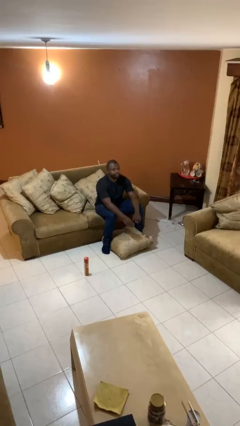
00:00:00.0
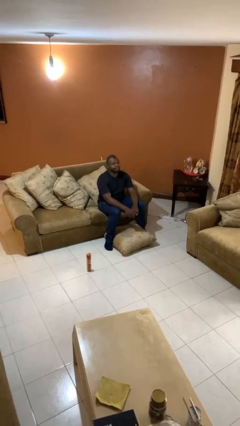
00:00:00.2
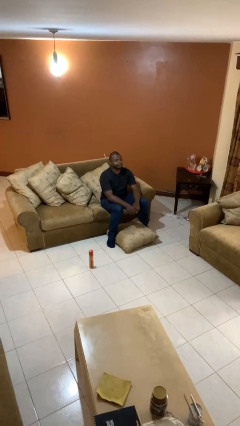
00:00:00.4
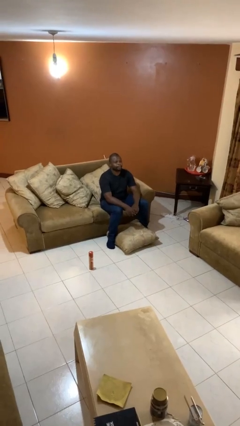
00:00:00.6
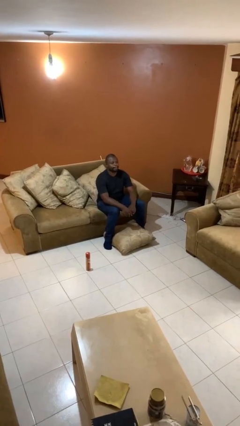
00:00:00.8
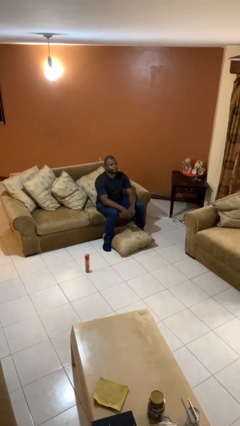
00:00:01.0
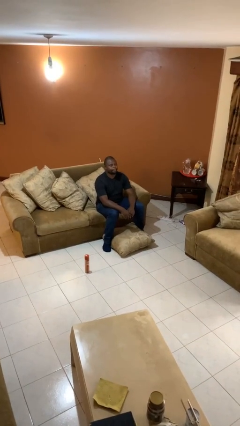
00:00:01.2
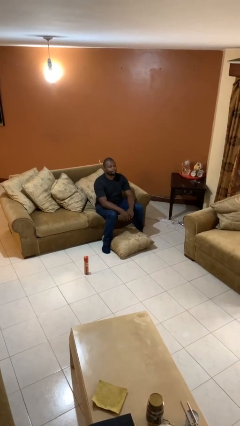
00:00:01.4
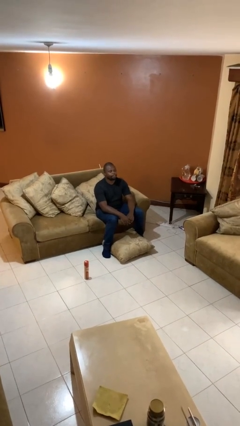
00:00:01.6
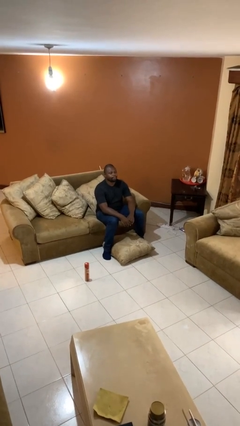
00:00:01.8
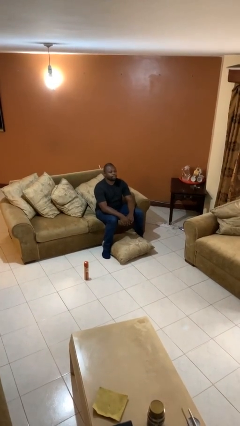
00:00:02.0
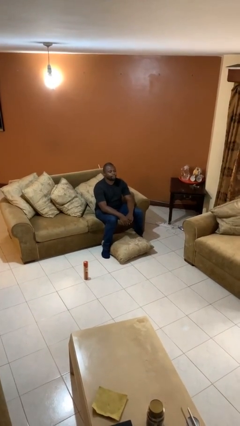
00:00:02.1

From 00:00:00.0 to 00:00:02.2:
person sits down

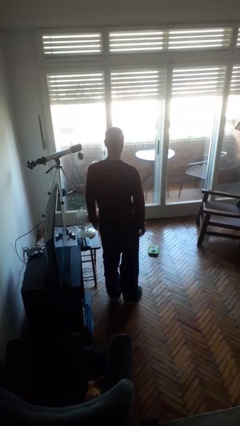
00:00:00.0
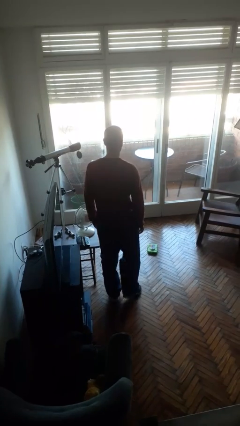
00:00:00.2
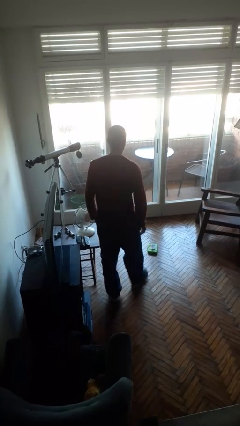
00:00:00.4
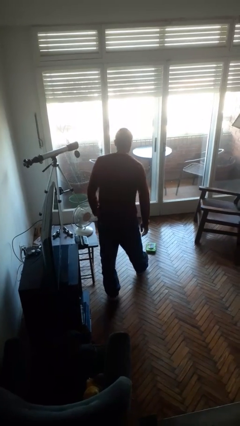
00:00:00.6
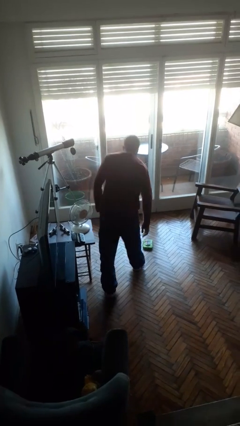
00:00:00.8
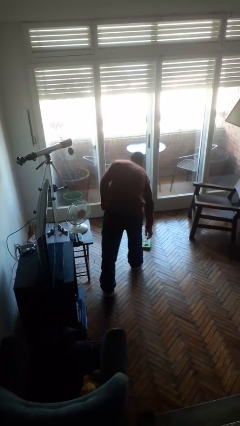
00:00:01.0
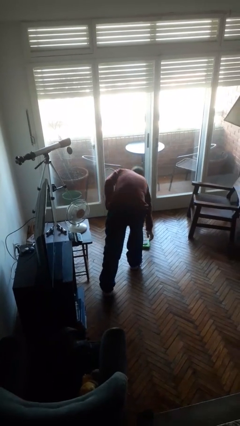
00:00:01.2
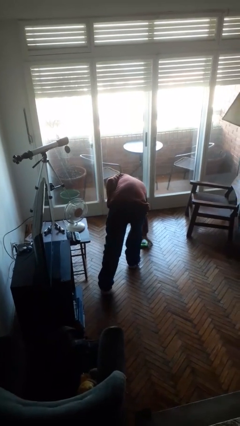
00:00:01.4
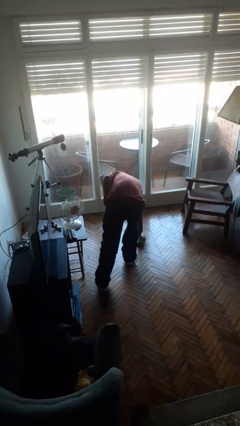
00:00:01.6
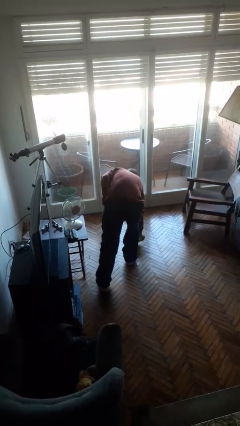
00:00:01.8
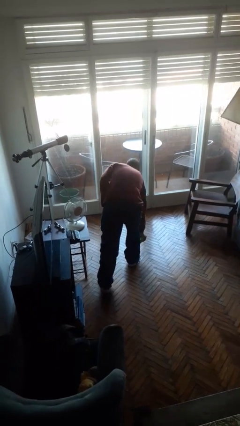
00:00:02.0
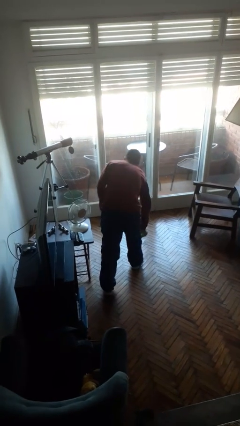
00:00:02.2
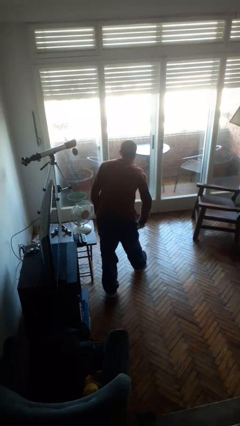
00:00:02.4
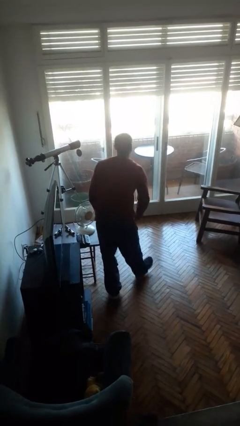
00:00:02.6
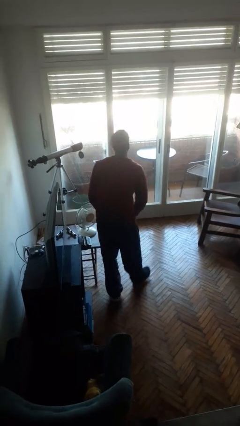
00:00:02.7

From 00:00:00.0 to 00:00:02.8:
person picks up object from floor

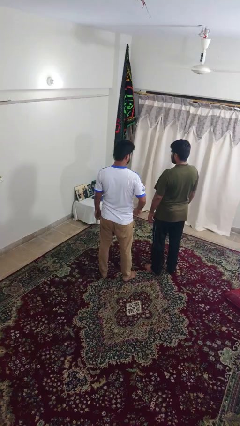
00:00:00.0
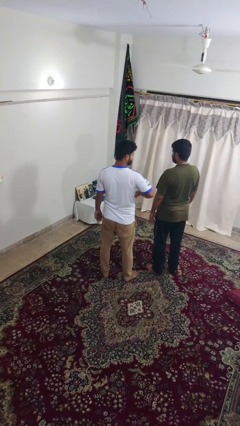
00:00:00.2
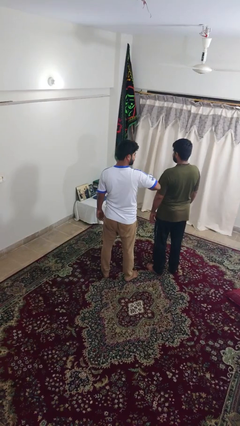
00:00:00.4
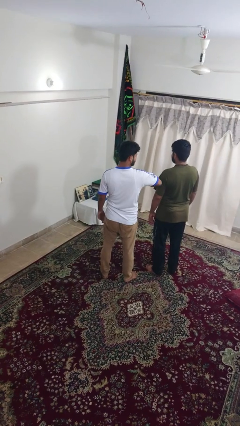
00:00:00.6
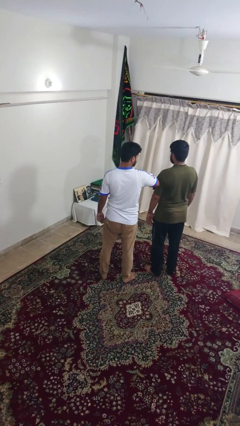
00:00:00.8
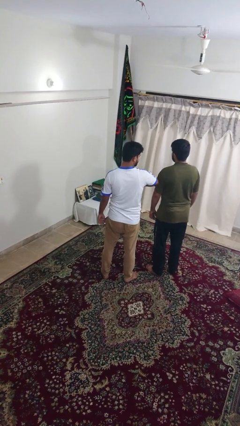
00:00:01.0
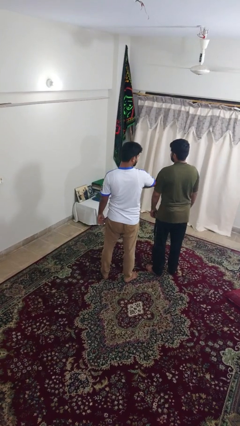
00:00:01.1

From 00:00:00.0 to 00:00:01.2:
person nudges person with elbow

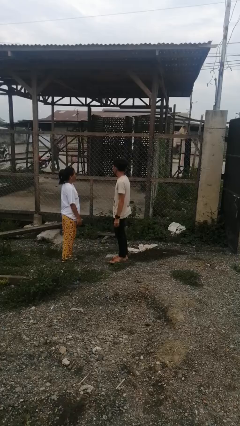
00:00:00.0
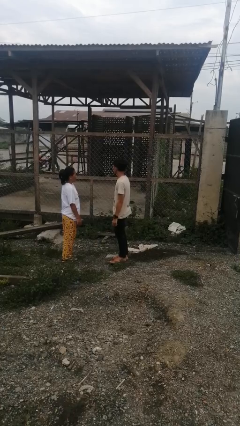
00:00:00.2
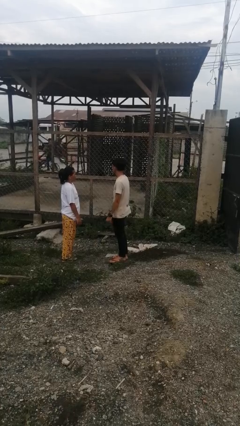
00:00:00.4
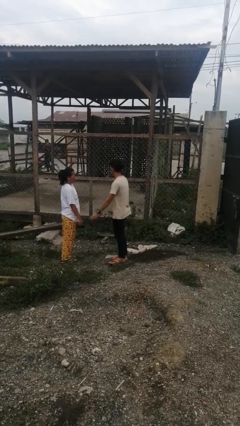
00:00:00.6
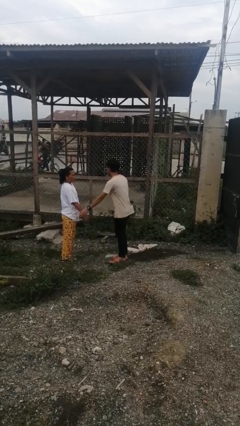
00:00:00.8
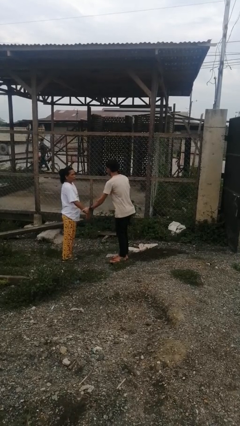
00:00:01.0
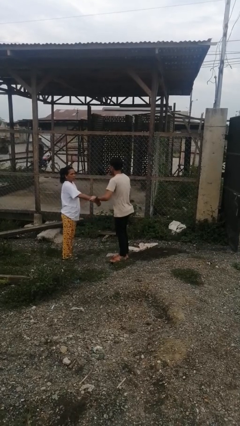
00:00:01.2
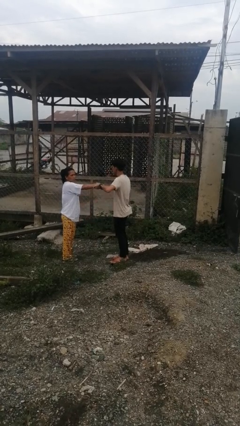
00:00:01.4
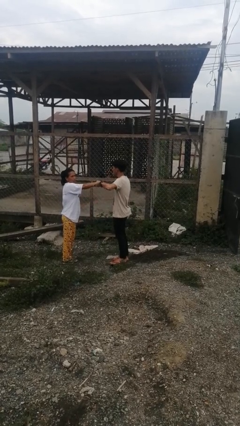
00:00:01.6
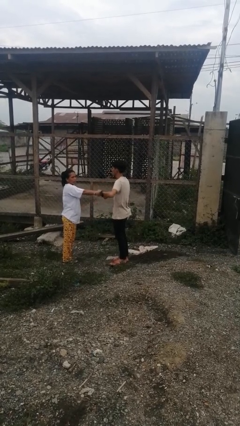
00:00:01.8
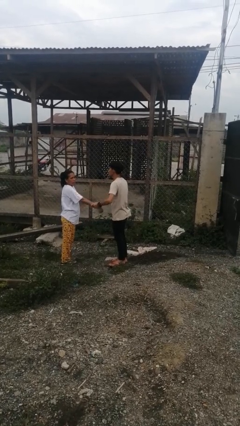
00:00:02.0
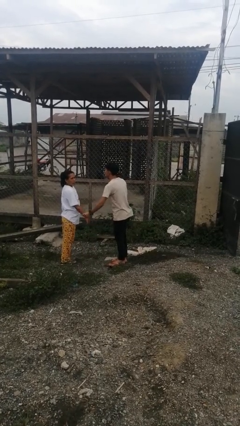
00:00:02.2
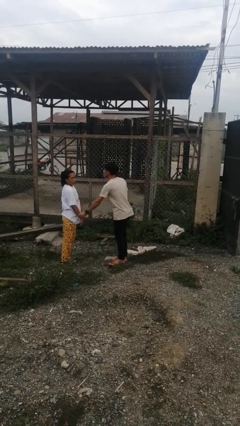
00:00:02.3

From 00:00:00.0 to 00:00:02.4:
person grabs person by forearm

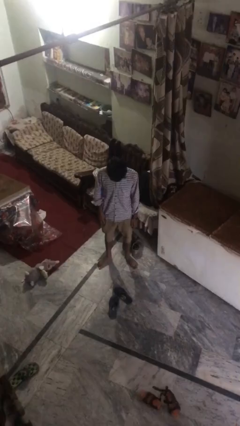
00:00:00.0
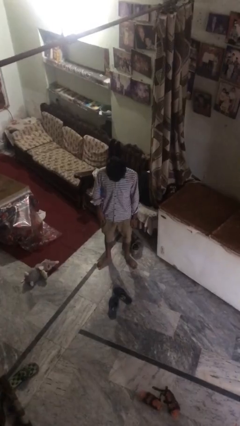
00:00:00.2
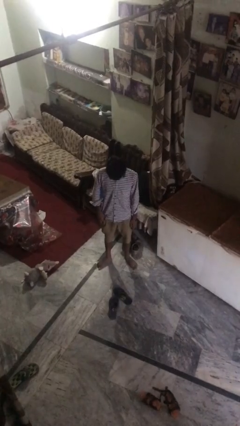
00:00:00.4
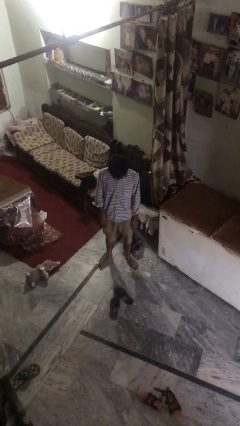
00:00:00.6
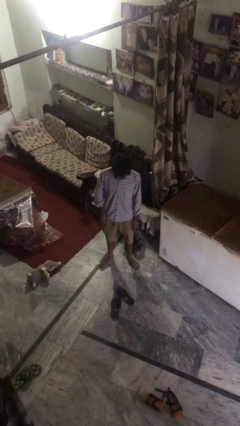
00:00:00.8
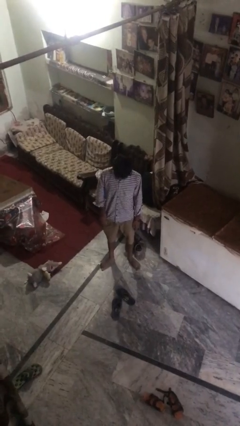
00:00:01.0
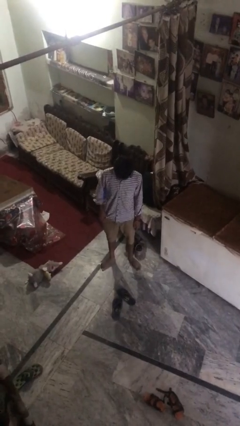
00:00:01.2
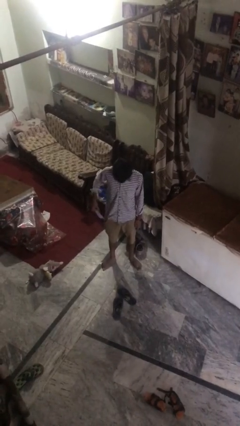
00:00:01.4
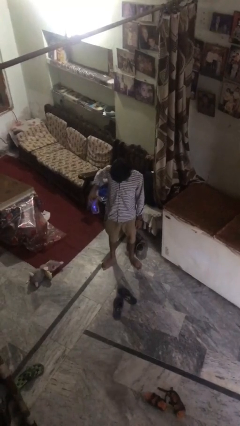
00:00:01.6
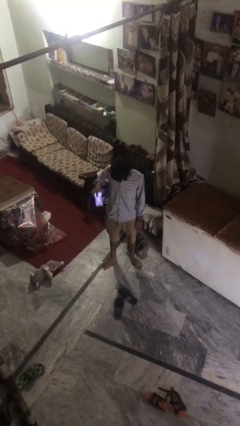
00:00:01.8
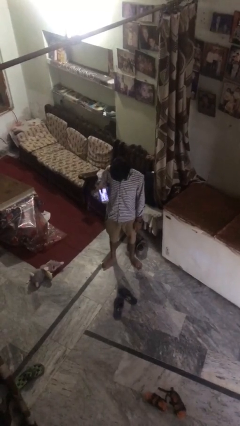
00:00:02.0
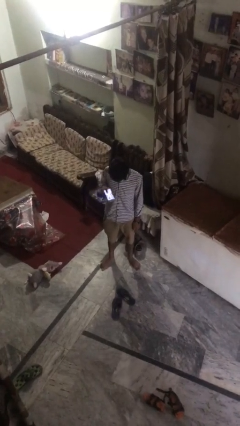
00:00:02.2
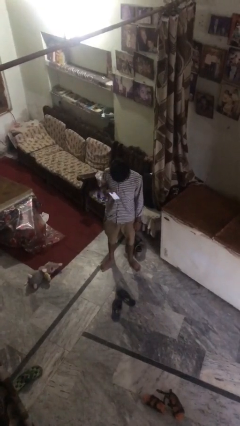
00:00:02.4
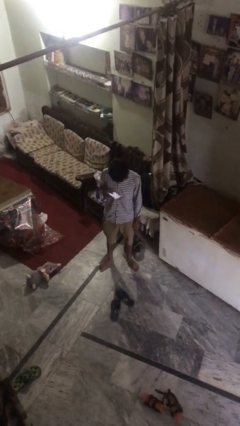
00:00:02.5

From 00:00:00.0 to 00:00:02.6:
person takes phone from pocket

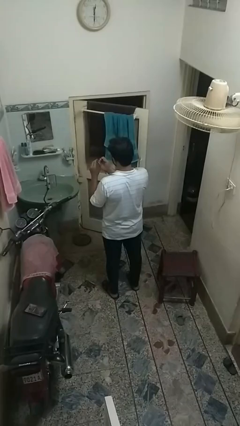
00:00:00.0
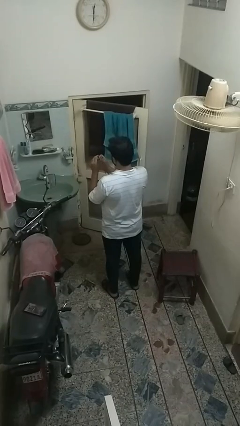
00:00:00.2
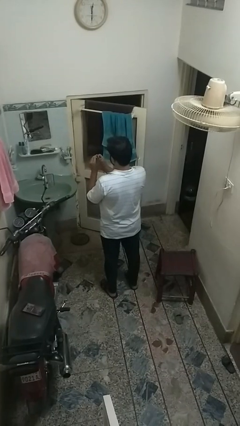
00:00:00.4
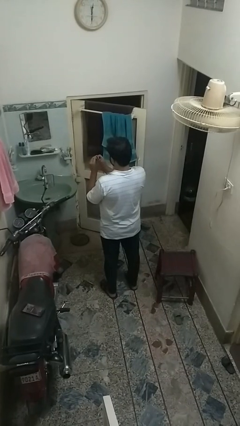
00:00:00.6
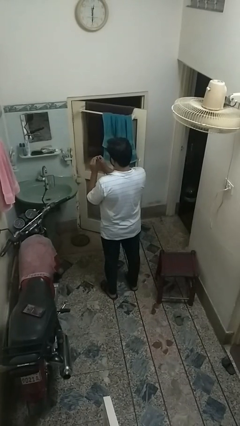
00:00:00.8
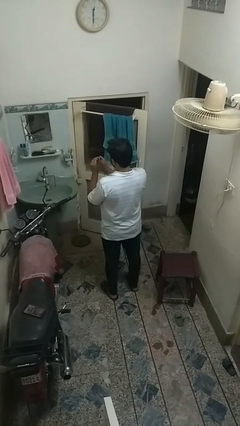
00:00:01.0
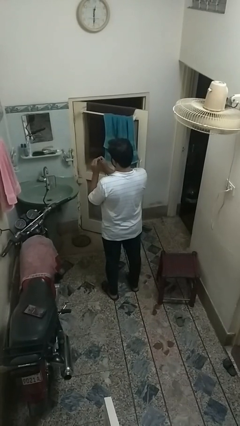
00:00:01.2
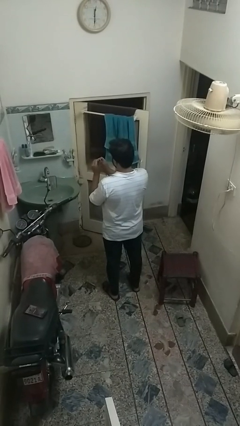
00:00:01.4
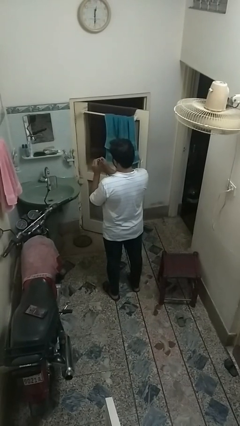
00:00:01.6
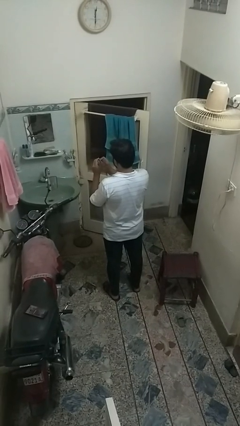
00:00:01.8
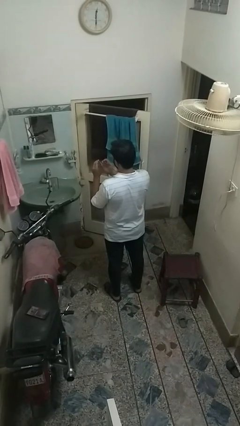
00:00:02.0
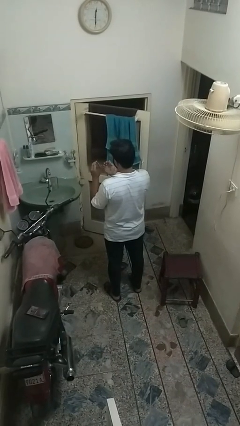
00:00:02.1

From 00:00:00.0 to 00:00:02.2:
person clips fingernails

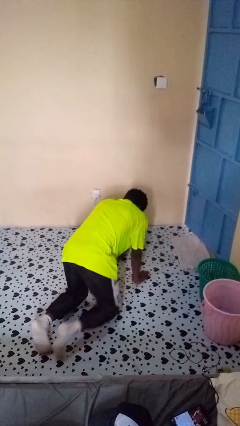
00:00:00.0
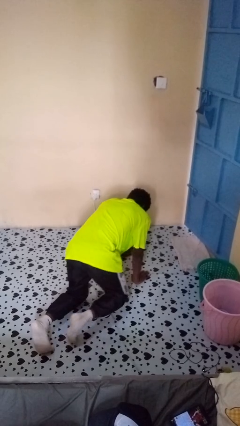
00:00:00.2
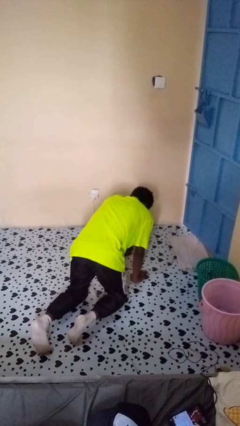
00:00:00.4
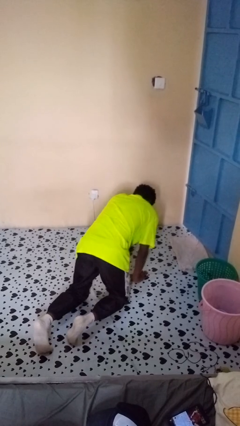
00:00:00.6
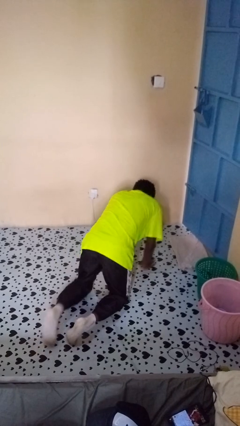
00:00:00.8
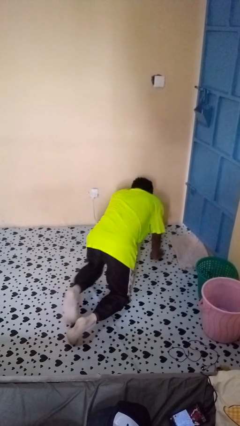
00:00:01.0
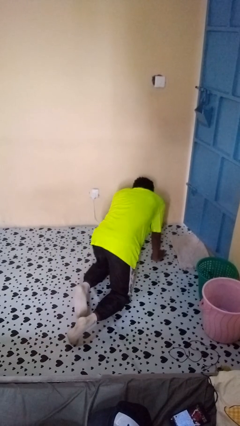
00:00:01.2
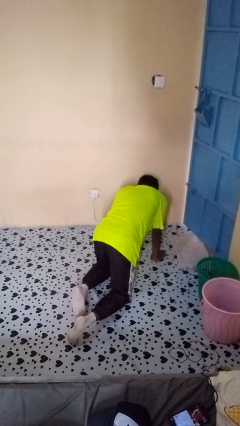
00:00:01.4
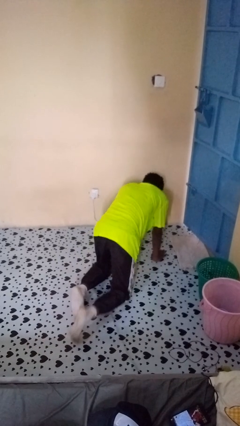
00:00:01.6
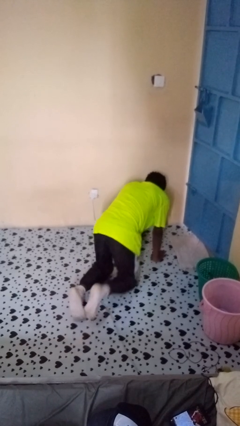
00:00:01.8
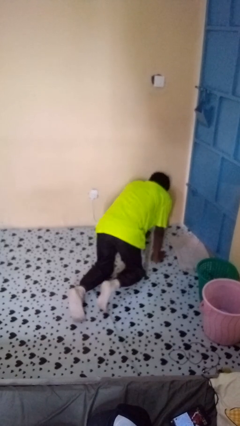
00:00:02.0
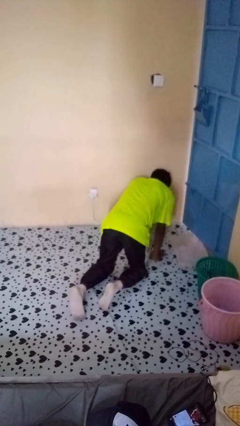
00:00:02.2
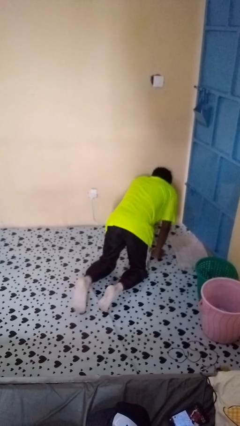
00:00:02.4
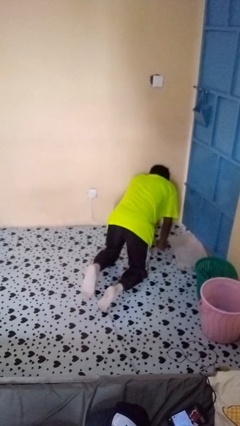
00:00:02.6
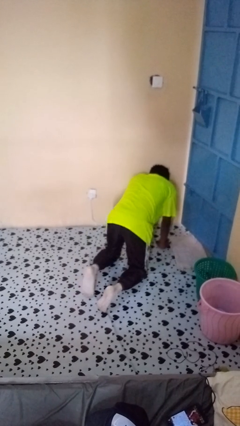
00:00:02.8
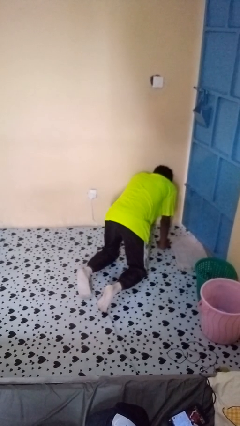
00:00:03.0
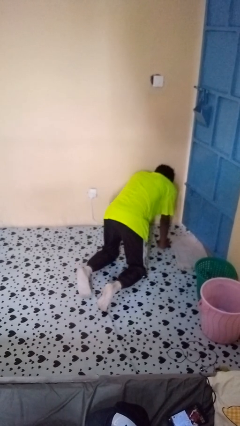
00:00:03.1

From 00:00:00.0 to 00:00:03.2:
person crawls

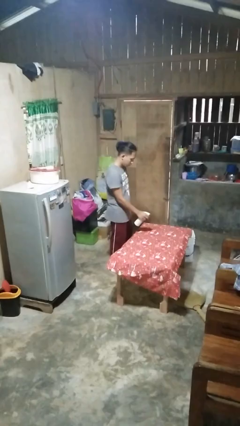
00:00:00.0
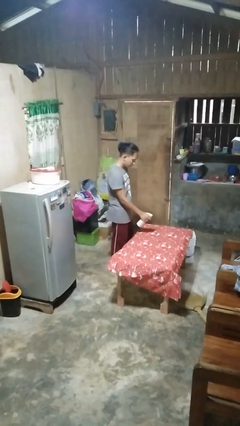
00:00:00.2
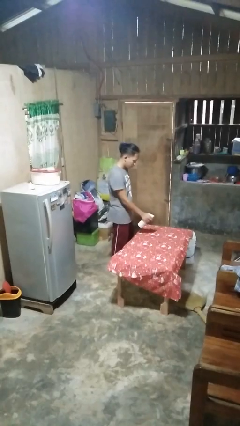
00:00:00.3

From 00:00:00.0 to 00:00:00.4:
person sprays from bottle

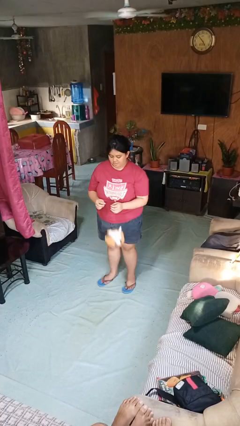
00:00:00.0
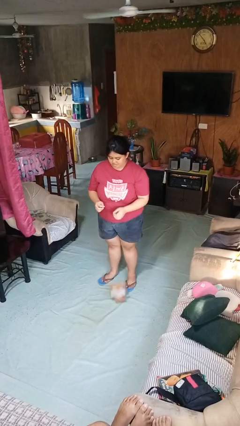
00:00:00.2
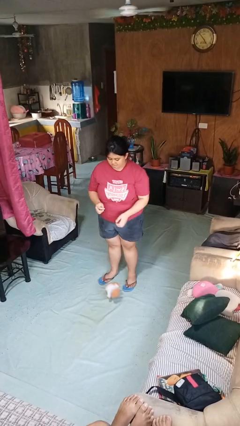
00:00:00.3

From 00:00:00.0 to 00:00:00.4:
person drops object
